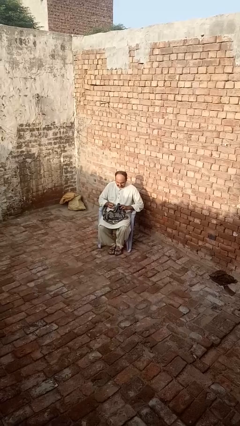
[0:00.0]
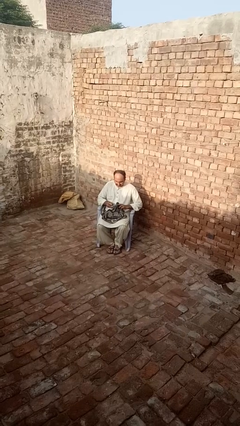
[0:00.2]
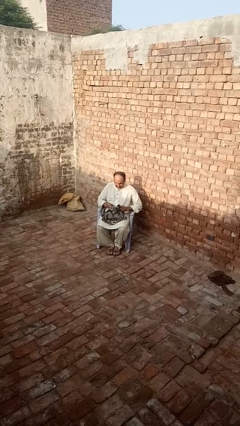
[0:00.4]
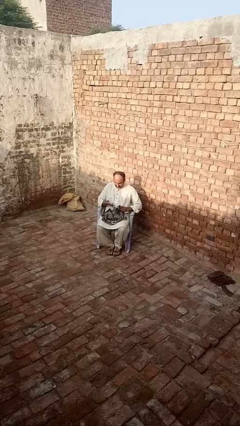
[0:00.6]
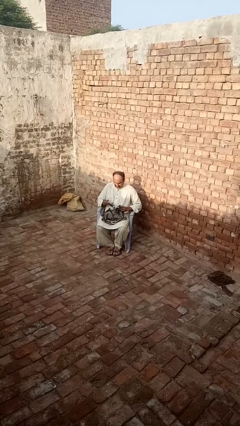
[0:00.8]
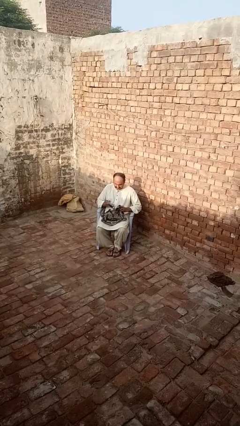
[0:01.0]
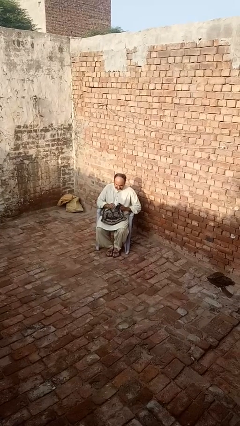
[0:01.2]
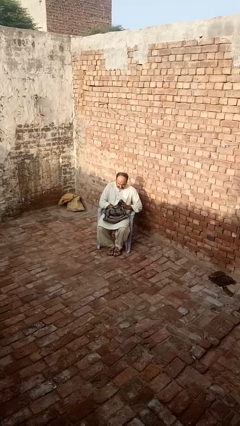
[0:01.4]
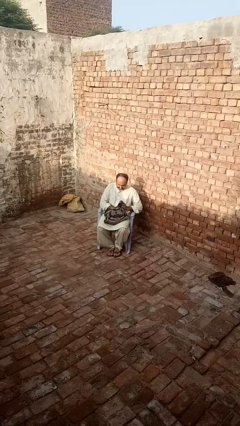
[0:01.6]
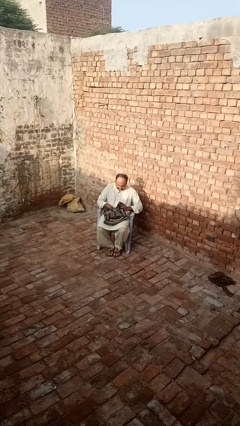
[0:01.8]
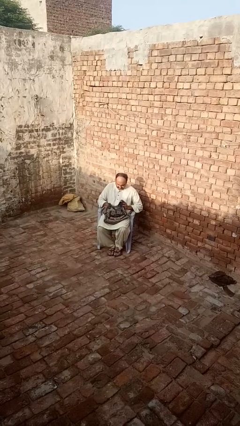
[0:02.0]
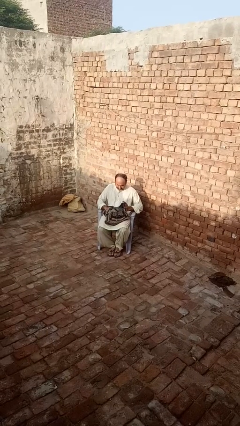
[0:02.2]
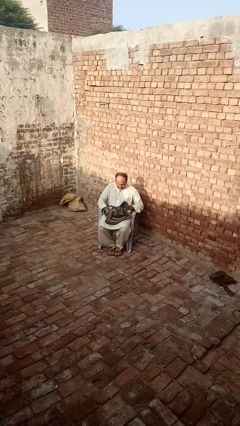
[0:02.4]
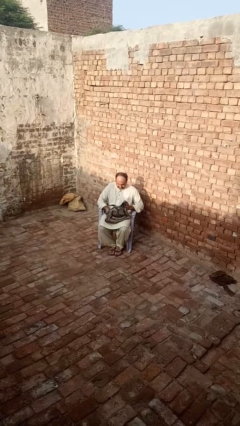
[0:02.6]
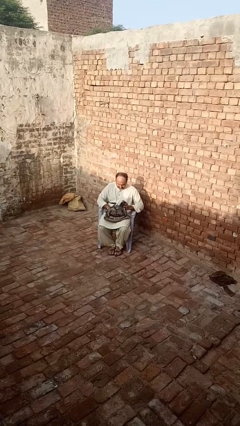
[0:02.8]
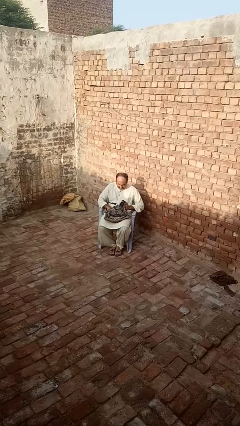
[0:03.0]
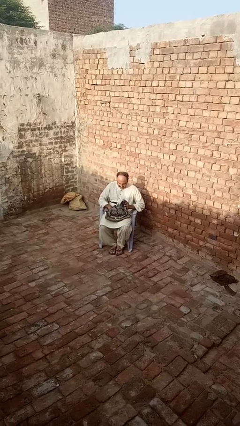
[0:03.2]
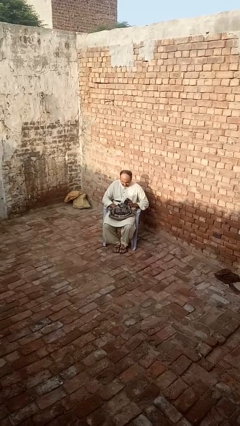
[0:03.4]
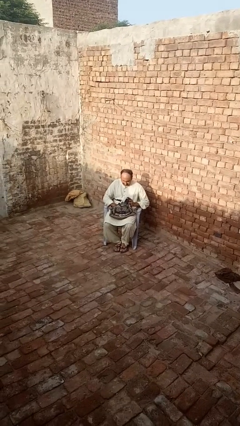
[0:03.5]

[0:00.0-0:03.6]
person puts object into purse

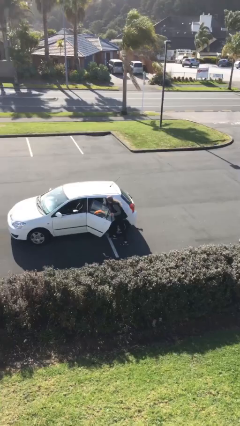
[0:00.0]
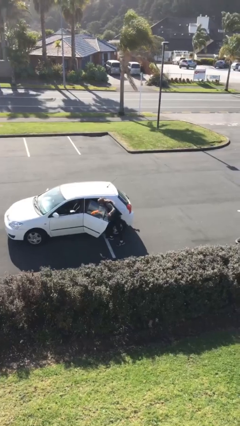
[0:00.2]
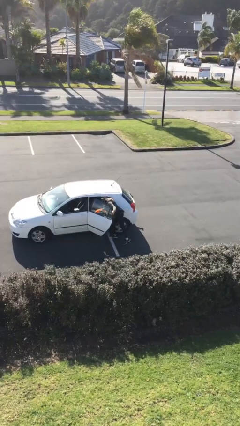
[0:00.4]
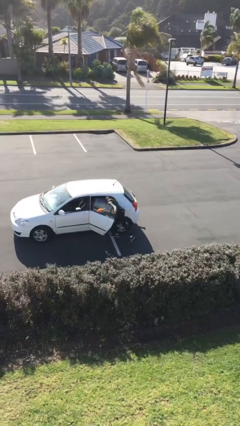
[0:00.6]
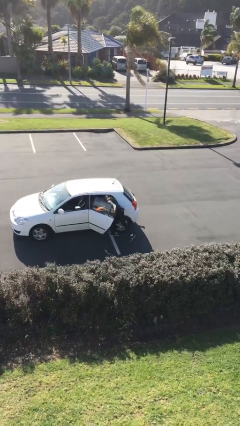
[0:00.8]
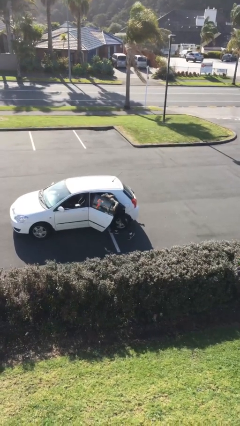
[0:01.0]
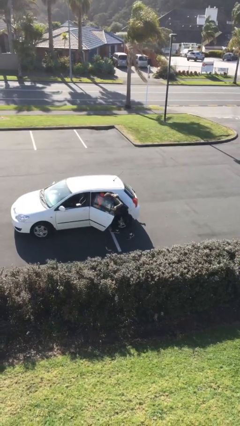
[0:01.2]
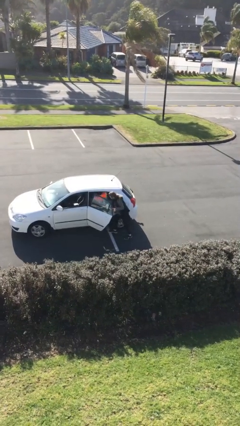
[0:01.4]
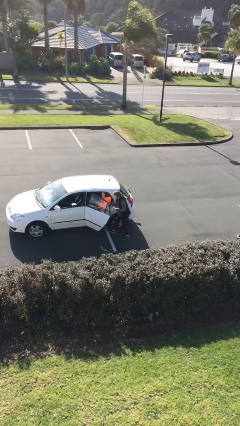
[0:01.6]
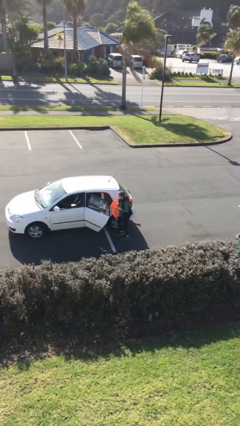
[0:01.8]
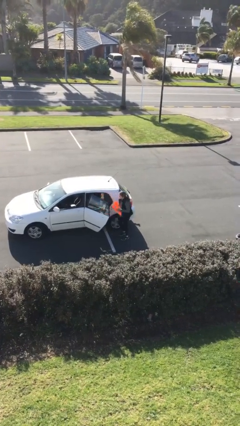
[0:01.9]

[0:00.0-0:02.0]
person unloads car

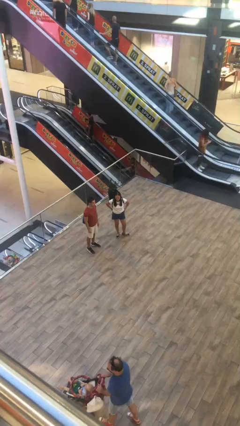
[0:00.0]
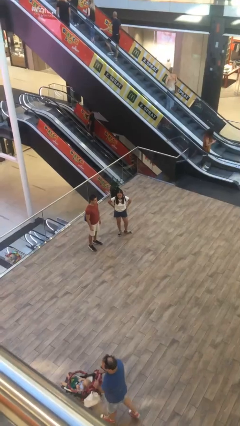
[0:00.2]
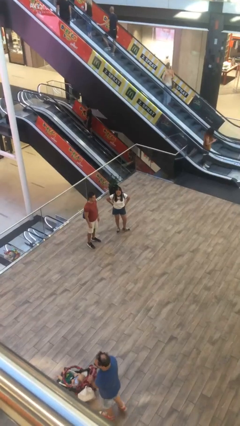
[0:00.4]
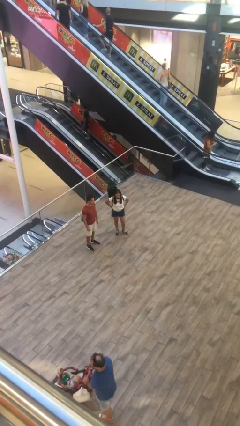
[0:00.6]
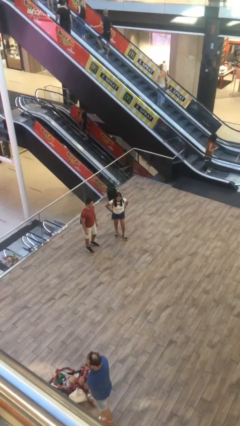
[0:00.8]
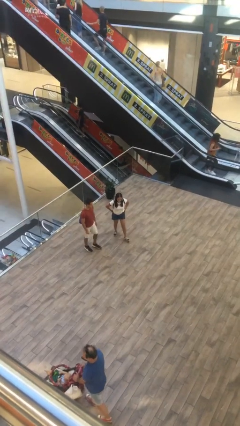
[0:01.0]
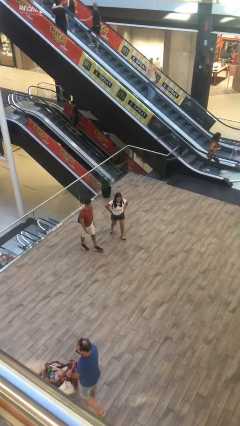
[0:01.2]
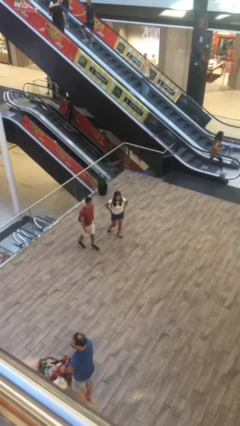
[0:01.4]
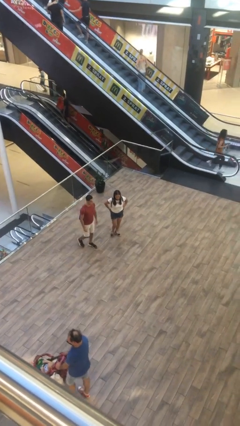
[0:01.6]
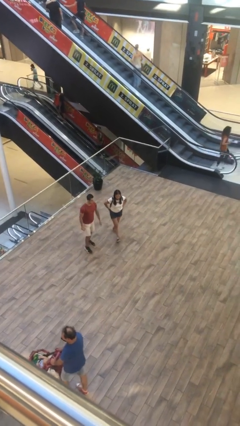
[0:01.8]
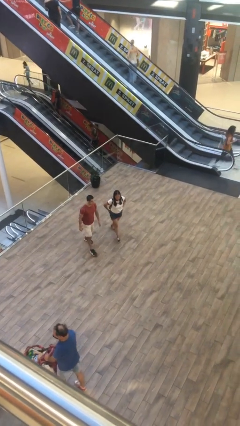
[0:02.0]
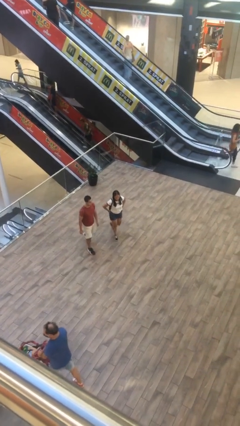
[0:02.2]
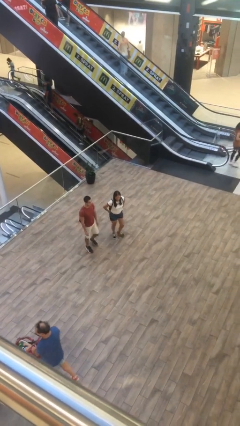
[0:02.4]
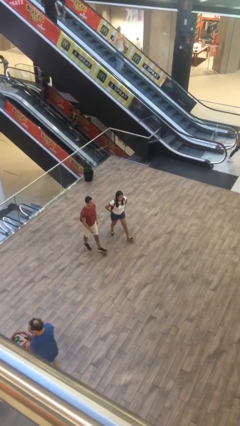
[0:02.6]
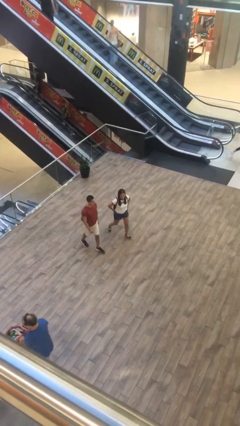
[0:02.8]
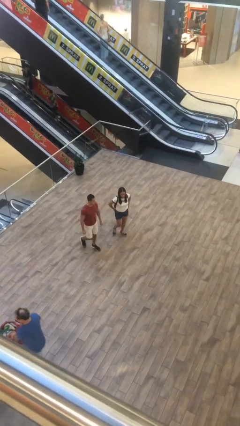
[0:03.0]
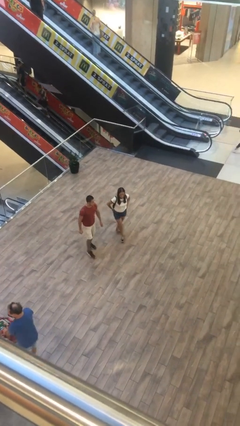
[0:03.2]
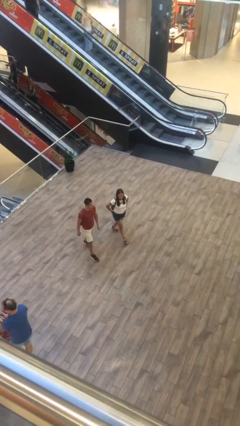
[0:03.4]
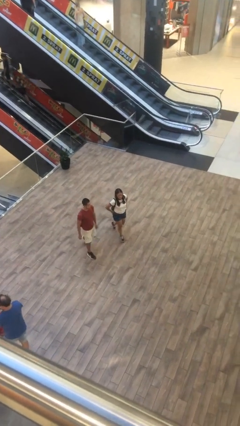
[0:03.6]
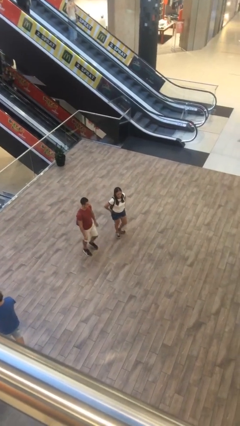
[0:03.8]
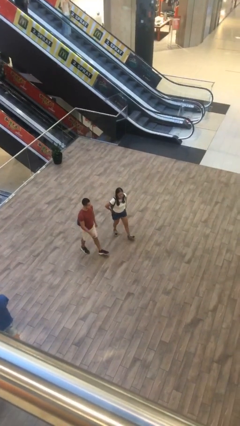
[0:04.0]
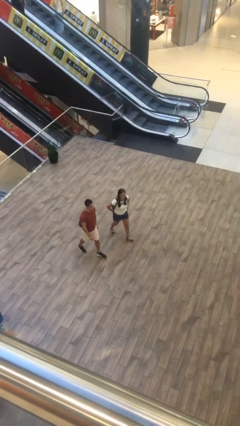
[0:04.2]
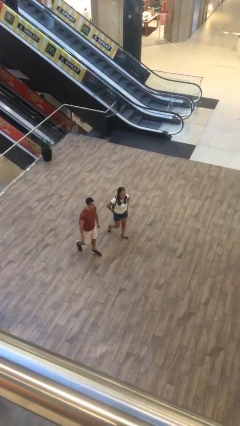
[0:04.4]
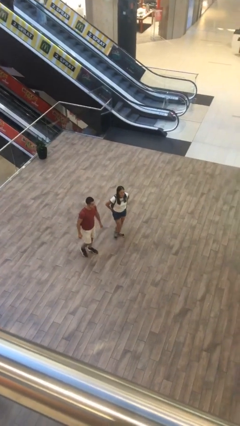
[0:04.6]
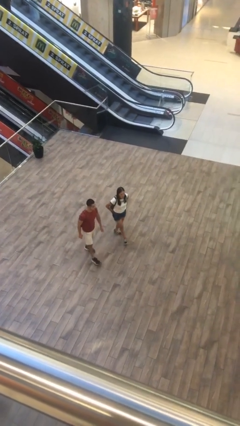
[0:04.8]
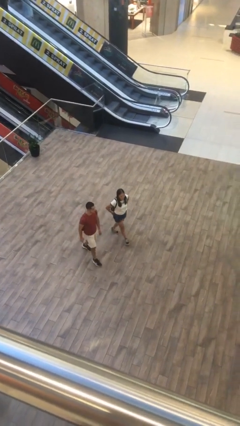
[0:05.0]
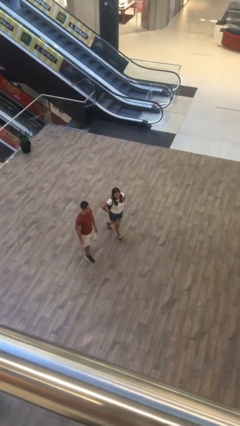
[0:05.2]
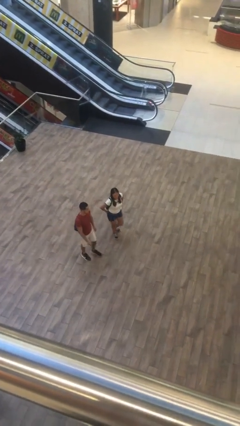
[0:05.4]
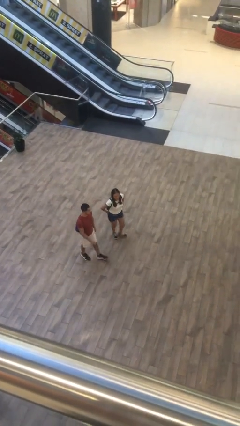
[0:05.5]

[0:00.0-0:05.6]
person talks to person

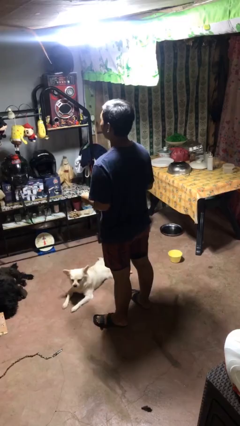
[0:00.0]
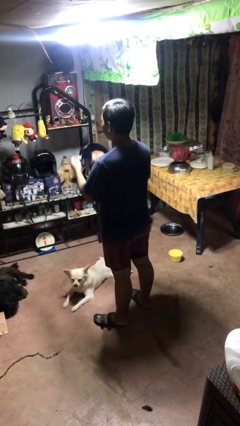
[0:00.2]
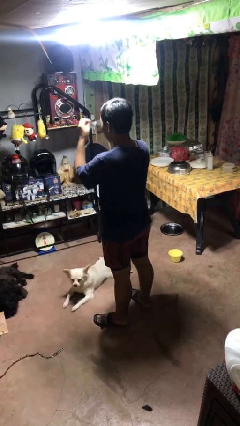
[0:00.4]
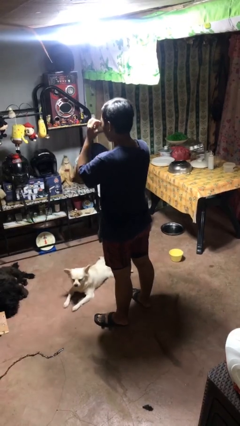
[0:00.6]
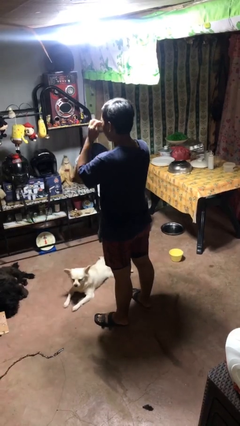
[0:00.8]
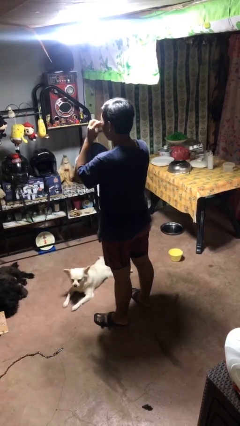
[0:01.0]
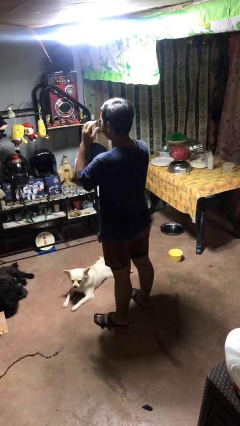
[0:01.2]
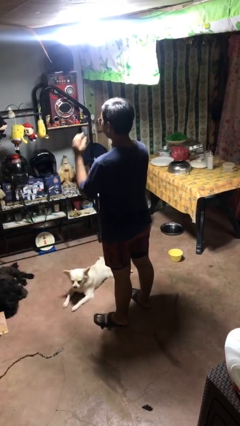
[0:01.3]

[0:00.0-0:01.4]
person puts on sunglasses

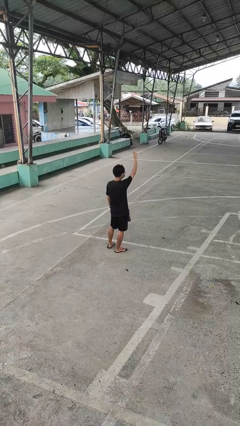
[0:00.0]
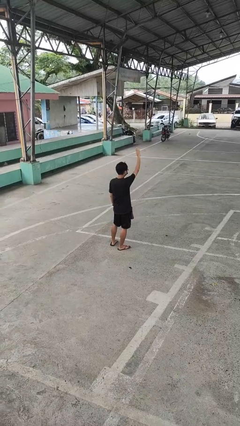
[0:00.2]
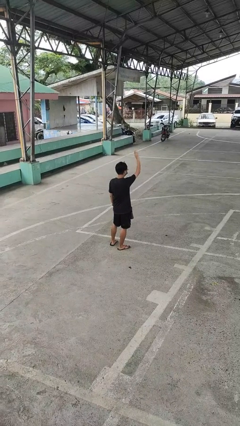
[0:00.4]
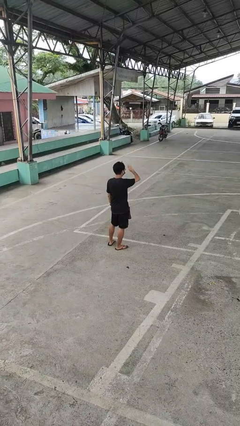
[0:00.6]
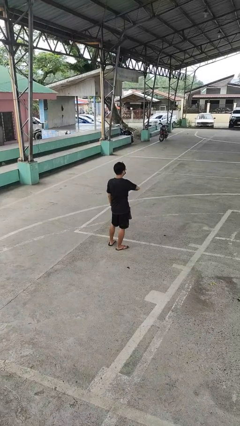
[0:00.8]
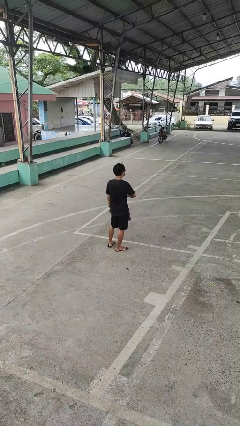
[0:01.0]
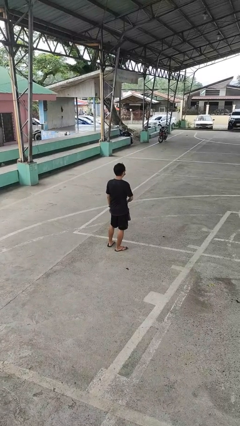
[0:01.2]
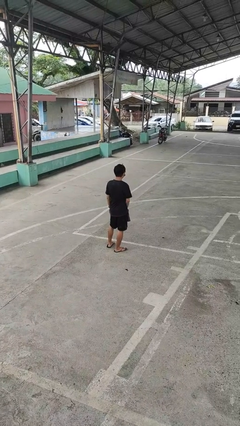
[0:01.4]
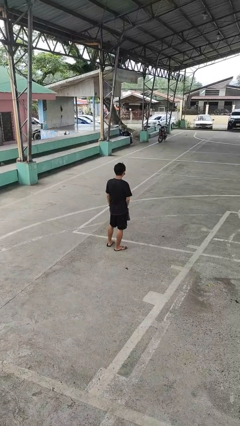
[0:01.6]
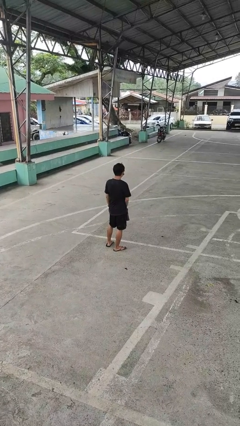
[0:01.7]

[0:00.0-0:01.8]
person gestures swipe down

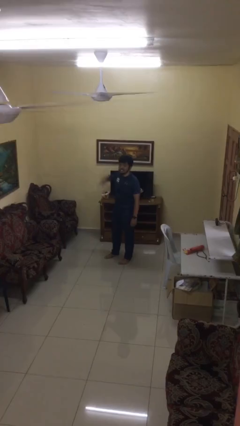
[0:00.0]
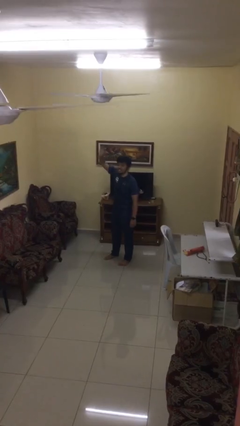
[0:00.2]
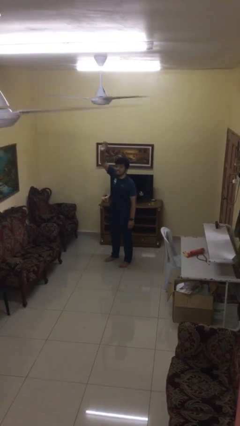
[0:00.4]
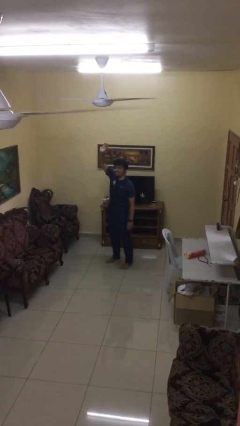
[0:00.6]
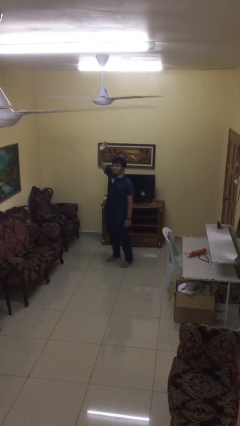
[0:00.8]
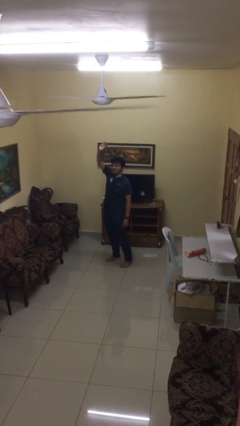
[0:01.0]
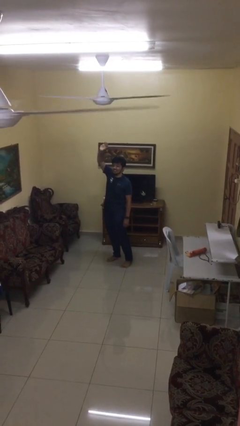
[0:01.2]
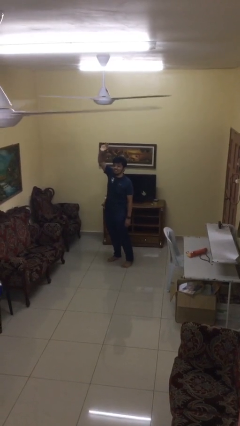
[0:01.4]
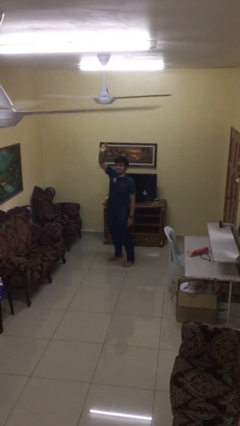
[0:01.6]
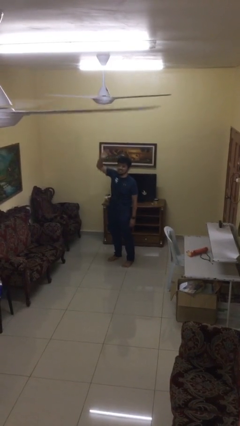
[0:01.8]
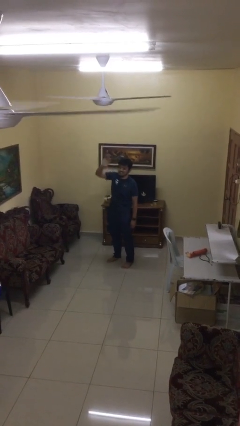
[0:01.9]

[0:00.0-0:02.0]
person gestures raise hand

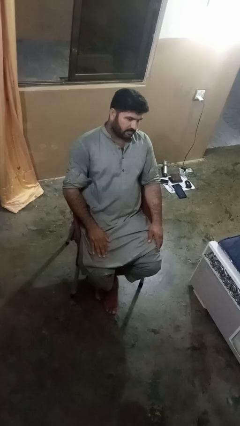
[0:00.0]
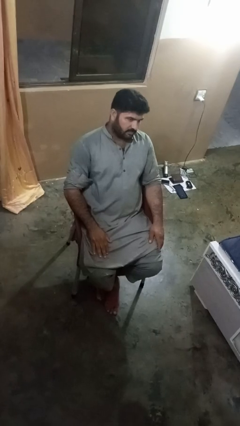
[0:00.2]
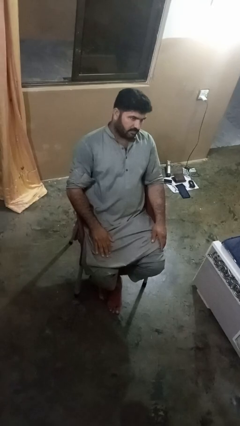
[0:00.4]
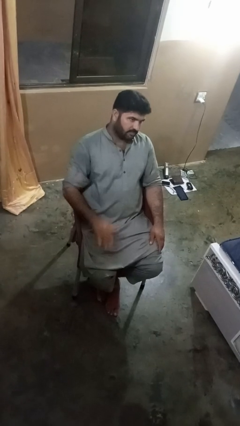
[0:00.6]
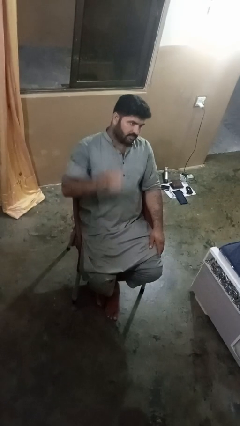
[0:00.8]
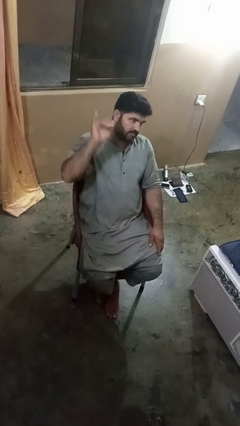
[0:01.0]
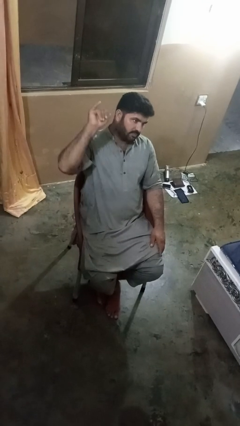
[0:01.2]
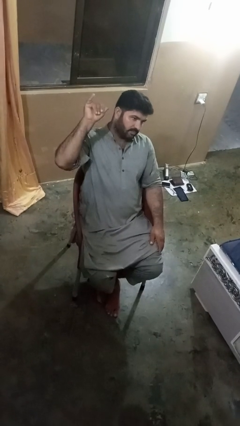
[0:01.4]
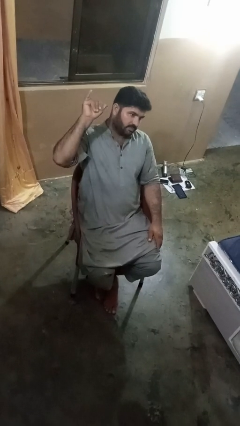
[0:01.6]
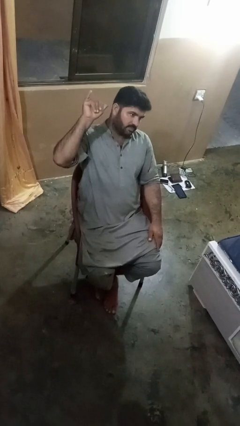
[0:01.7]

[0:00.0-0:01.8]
person gestures hang loose
